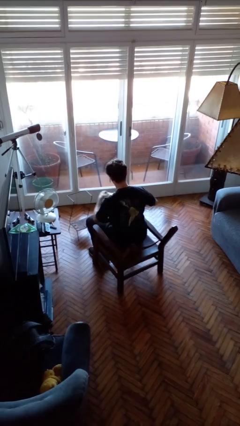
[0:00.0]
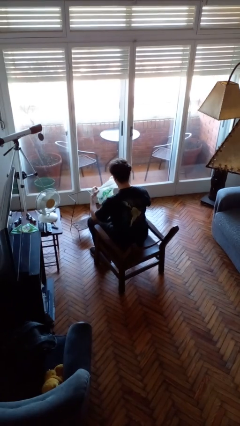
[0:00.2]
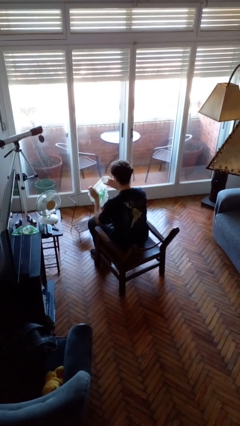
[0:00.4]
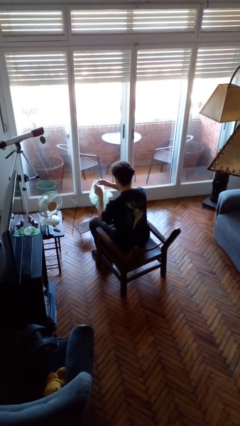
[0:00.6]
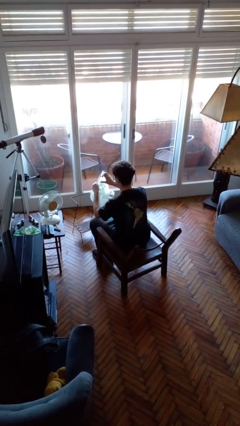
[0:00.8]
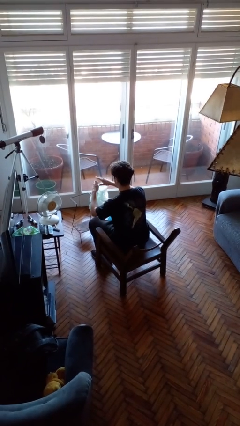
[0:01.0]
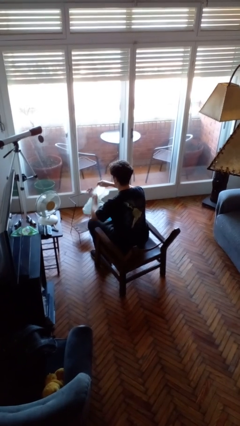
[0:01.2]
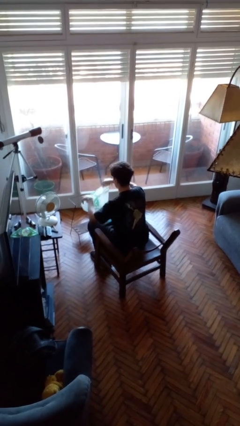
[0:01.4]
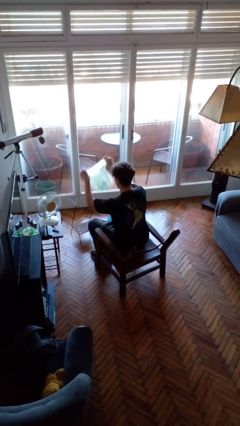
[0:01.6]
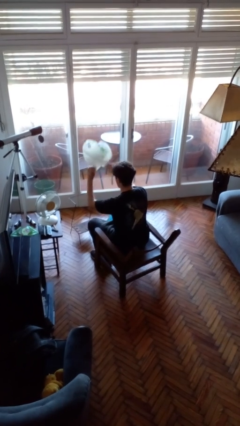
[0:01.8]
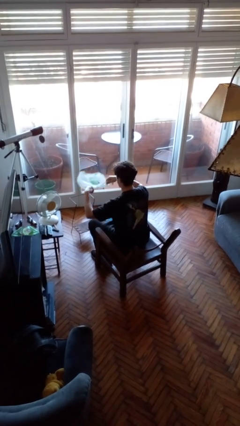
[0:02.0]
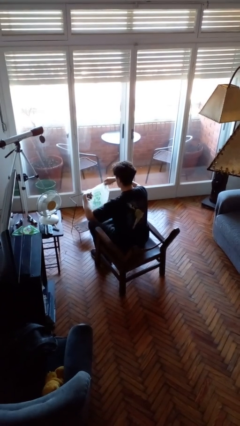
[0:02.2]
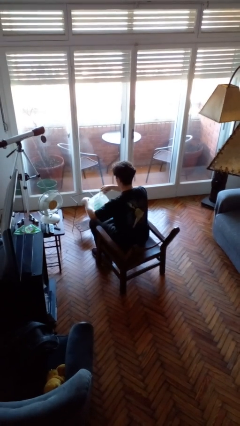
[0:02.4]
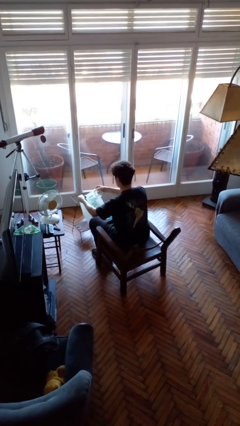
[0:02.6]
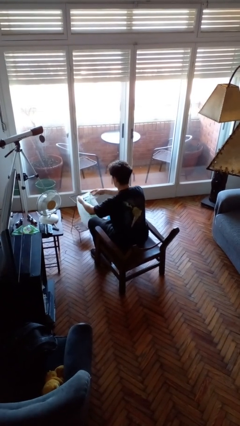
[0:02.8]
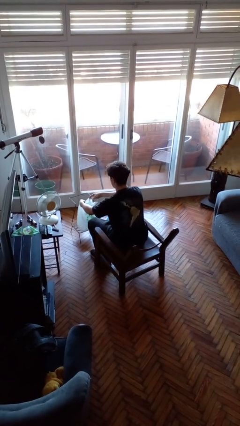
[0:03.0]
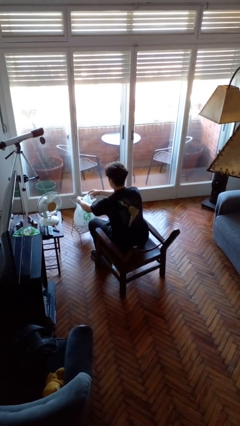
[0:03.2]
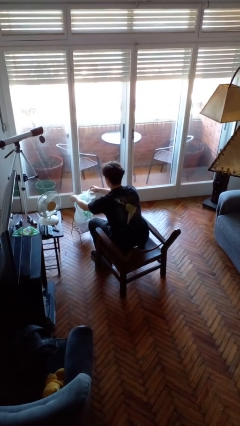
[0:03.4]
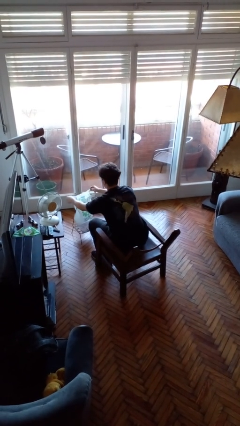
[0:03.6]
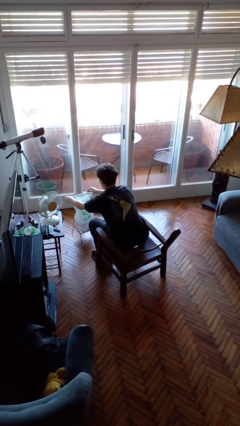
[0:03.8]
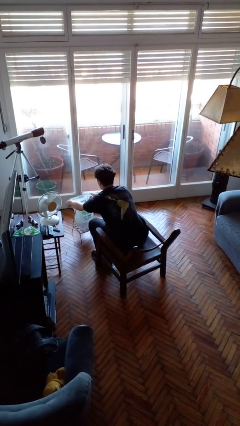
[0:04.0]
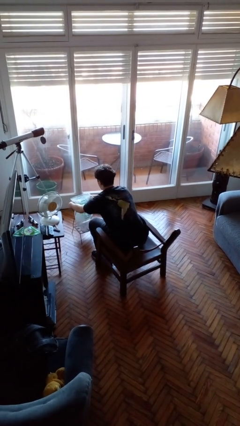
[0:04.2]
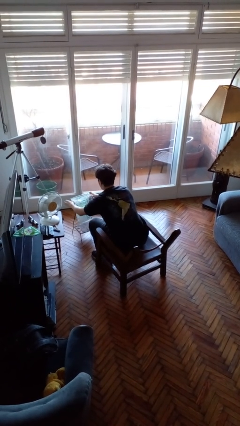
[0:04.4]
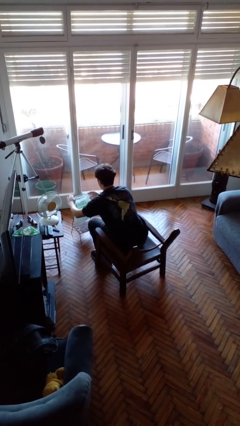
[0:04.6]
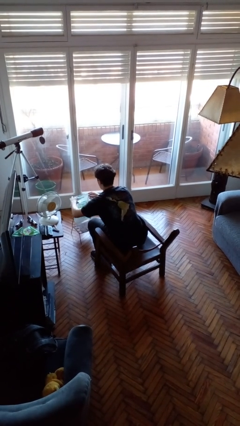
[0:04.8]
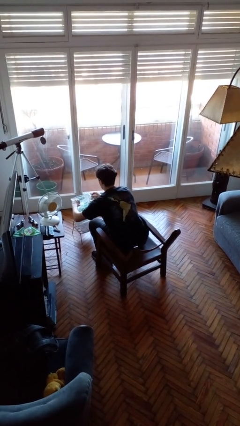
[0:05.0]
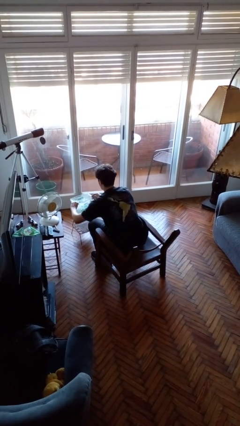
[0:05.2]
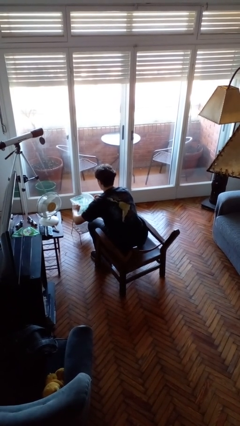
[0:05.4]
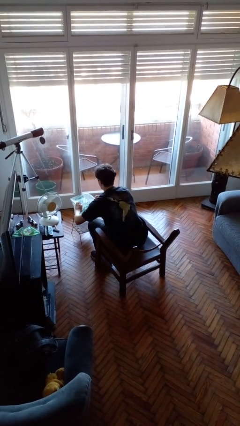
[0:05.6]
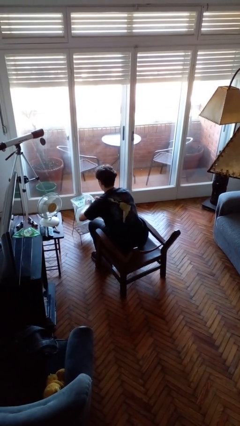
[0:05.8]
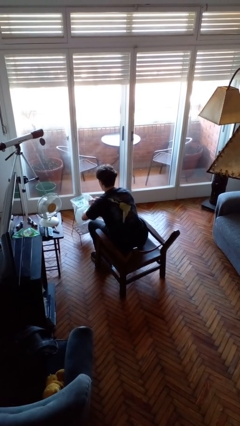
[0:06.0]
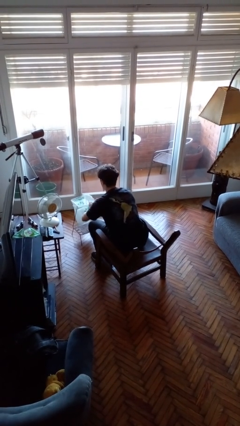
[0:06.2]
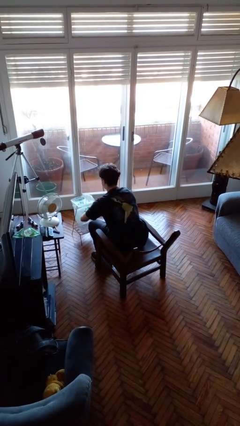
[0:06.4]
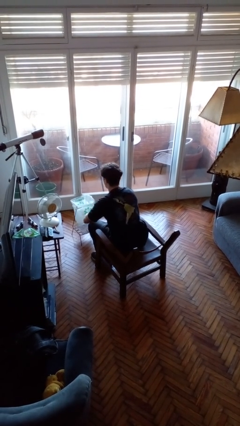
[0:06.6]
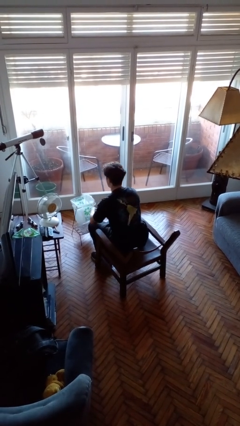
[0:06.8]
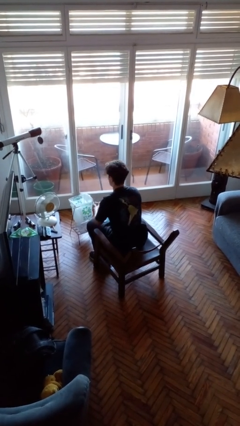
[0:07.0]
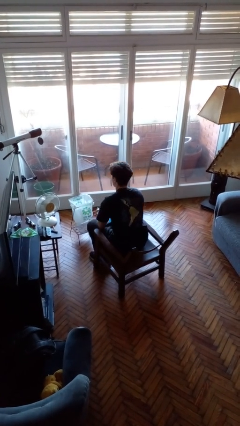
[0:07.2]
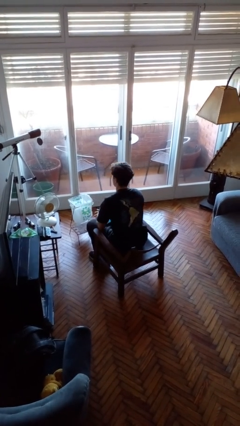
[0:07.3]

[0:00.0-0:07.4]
person inserts trashbag into trashcan

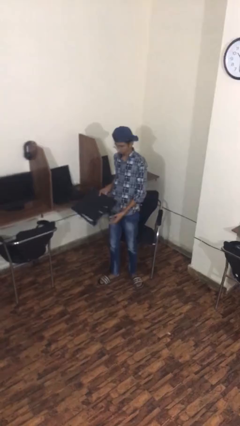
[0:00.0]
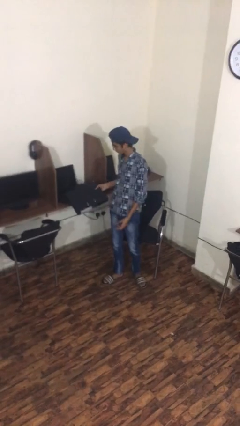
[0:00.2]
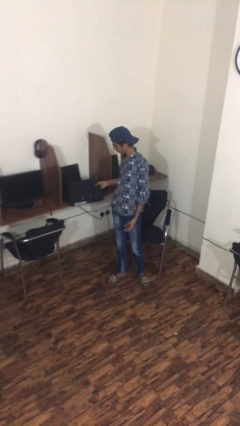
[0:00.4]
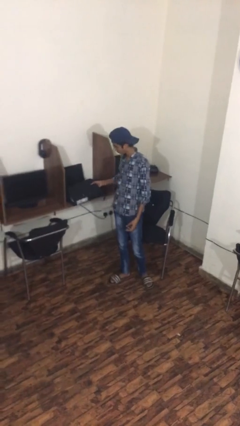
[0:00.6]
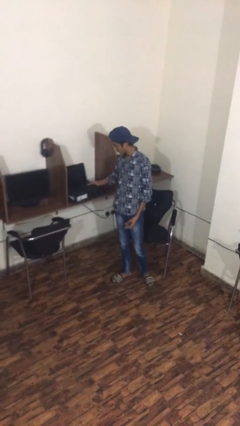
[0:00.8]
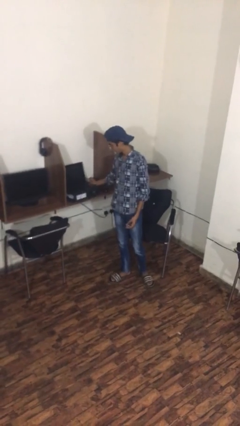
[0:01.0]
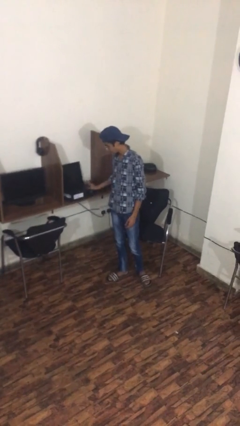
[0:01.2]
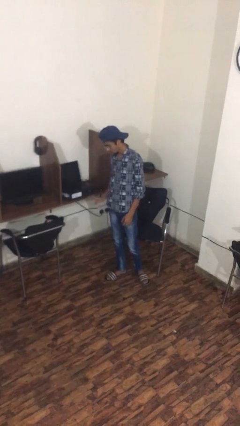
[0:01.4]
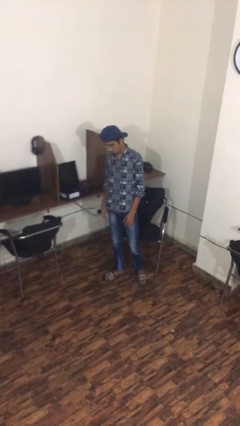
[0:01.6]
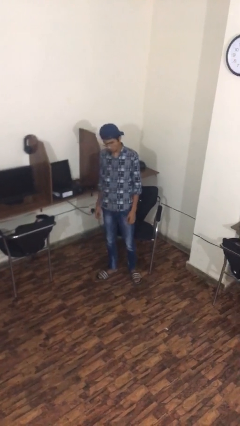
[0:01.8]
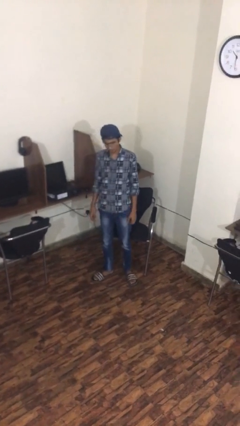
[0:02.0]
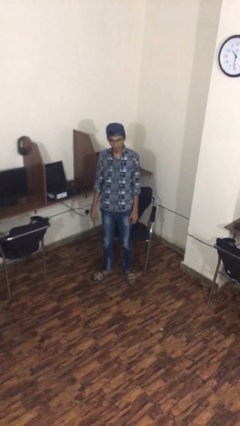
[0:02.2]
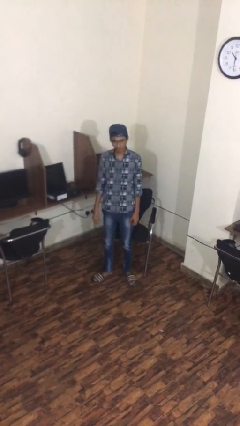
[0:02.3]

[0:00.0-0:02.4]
person puts down object on table

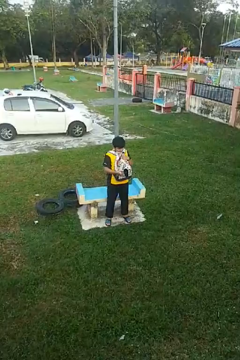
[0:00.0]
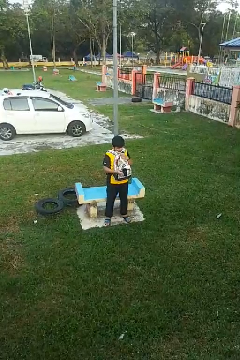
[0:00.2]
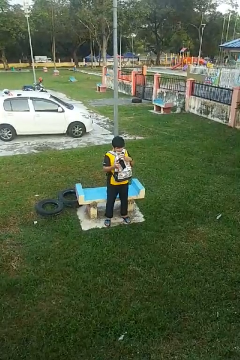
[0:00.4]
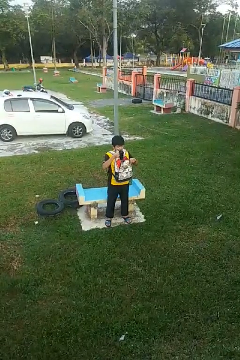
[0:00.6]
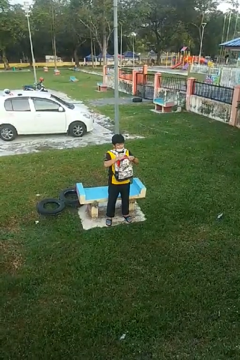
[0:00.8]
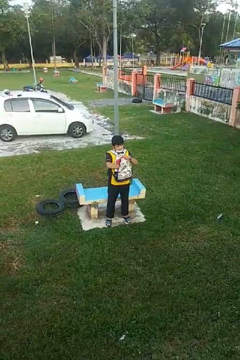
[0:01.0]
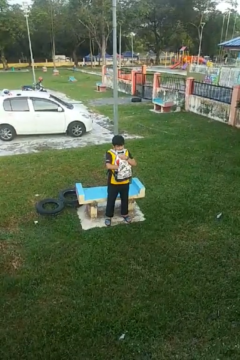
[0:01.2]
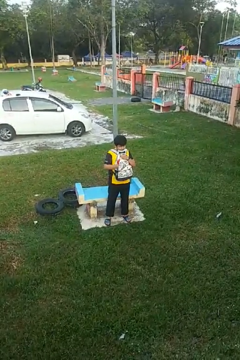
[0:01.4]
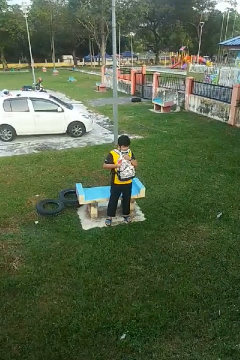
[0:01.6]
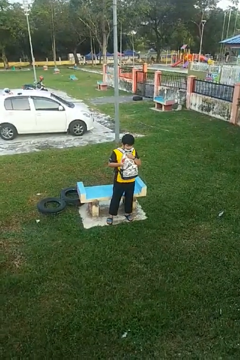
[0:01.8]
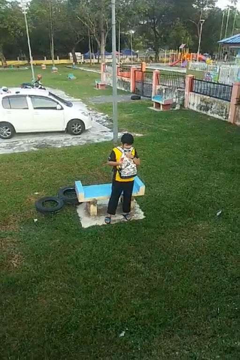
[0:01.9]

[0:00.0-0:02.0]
person puts object into backpack

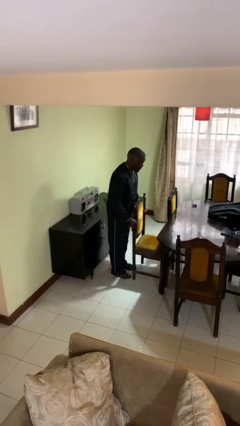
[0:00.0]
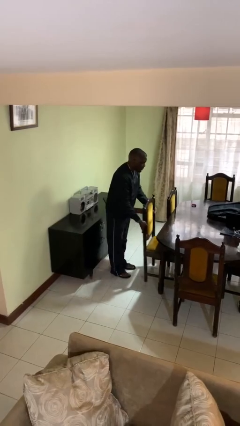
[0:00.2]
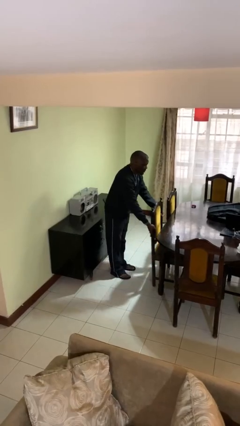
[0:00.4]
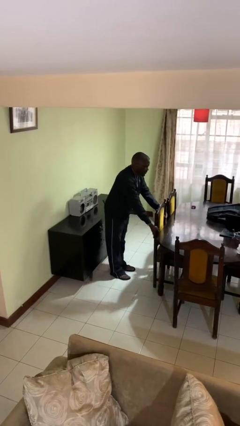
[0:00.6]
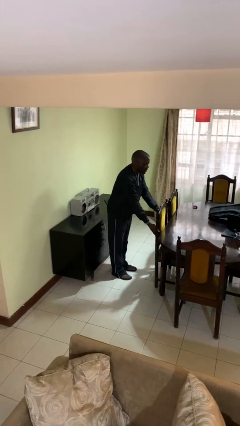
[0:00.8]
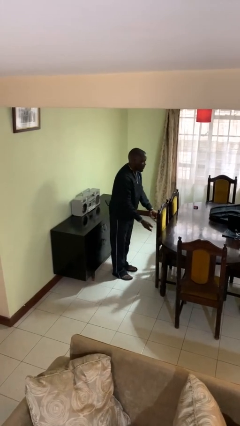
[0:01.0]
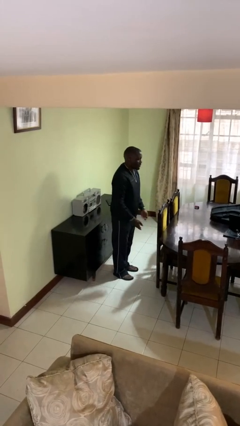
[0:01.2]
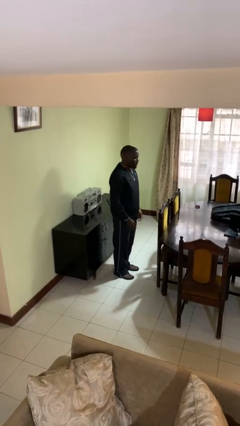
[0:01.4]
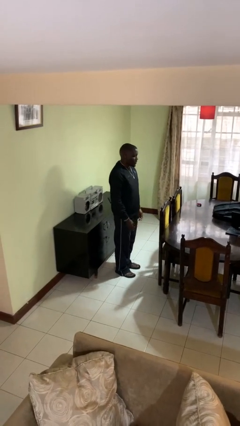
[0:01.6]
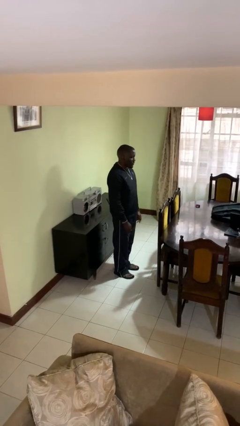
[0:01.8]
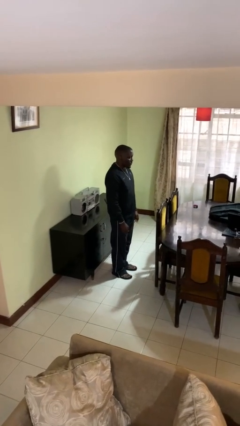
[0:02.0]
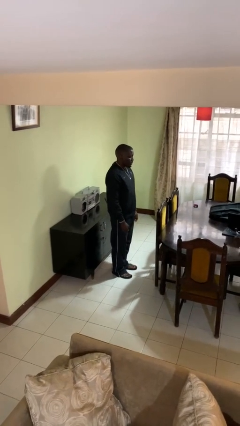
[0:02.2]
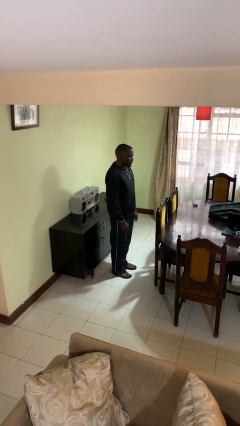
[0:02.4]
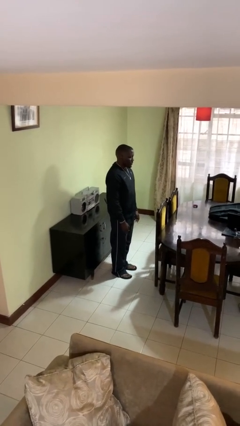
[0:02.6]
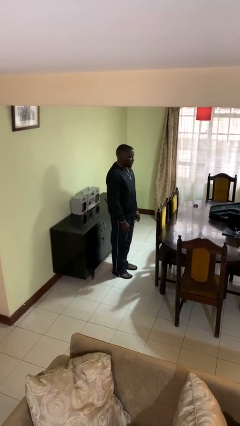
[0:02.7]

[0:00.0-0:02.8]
person pushes in chair

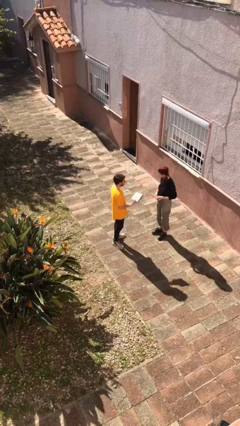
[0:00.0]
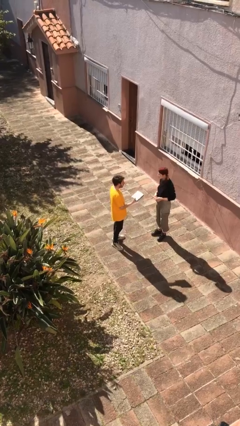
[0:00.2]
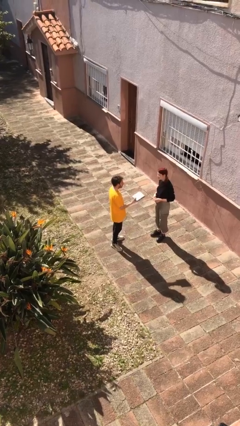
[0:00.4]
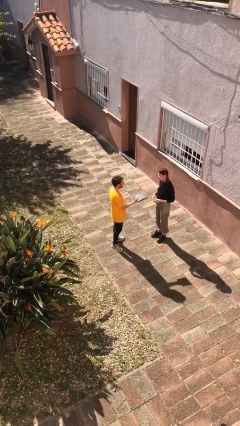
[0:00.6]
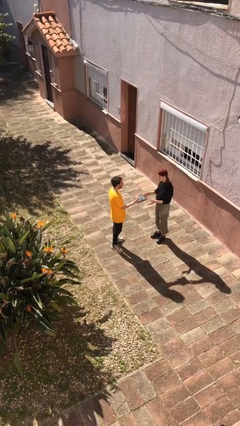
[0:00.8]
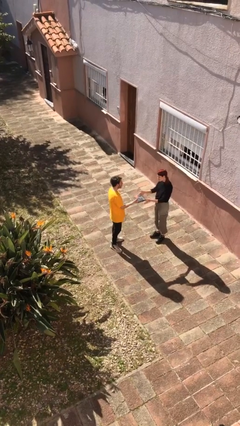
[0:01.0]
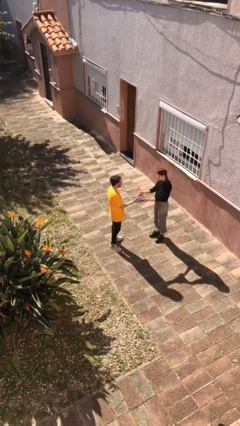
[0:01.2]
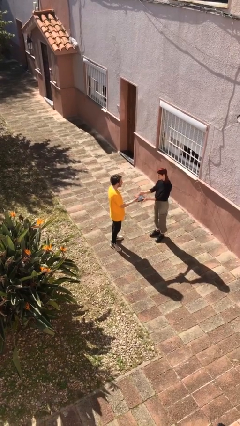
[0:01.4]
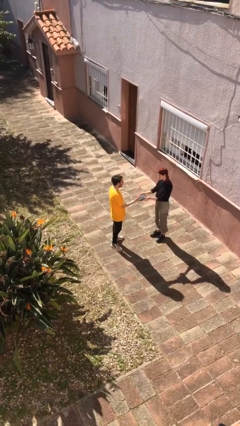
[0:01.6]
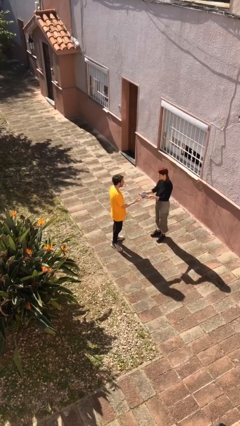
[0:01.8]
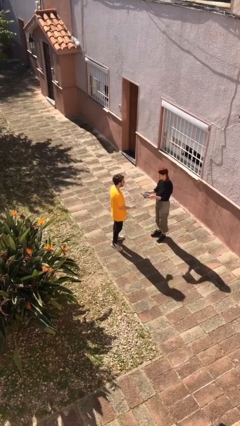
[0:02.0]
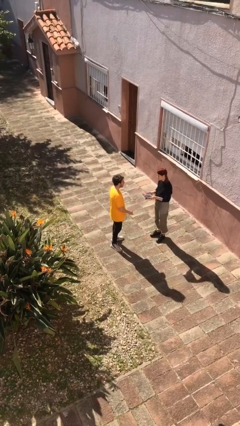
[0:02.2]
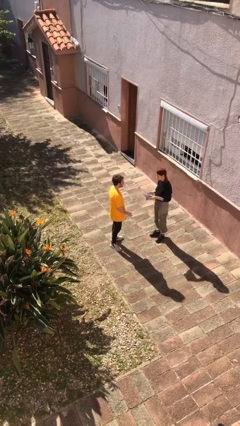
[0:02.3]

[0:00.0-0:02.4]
person transfers object to person

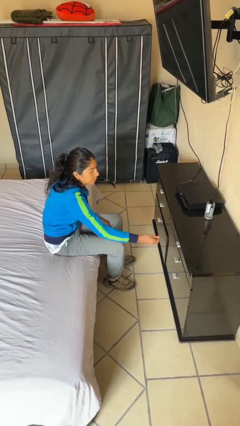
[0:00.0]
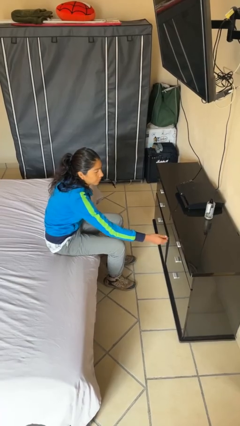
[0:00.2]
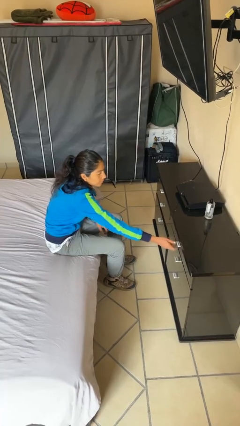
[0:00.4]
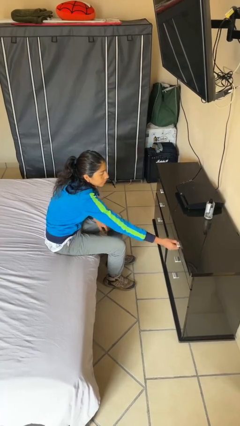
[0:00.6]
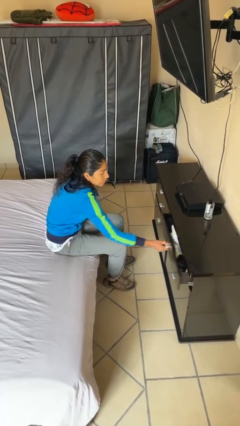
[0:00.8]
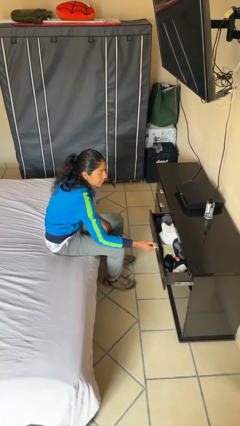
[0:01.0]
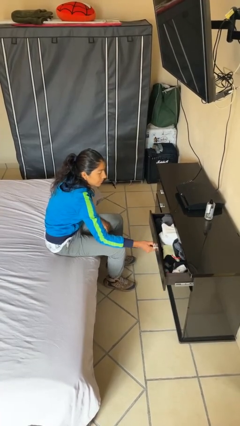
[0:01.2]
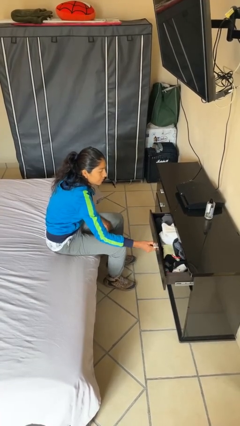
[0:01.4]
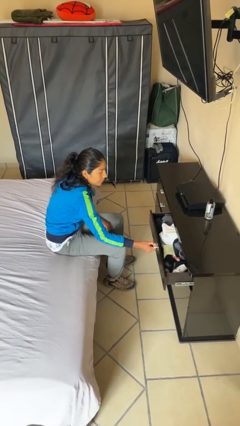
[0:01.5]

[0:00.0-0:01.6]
person opens dresser drawer
